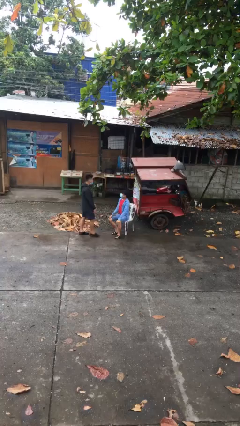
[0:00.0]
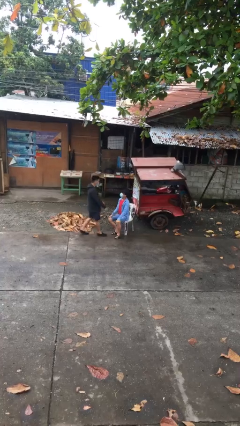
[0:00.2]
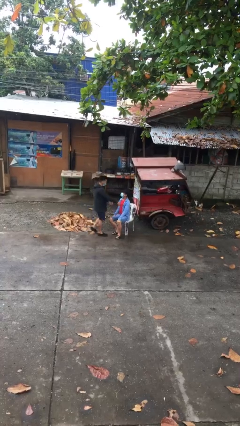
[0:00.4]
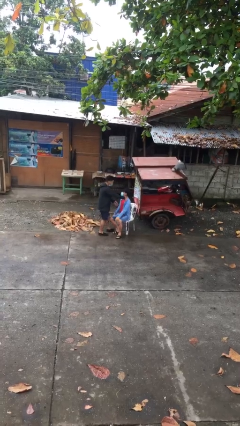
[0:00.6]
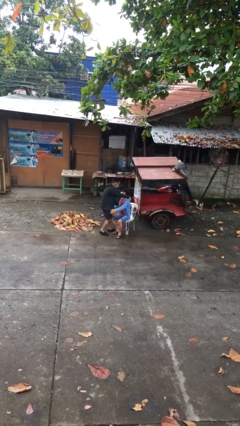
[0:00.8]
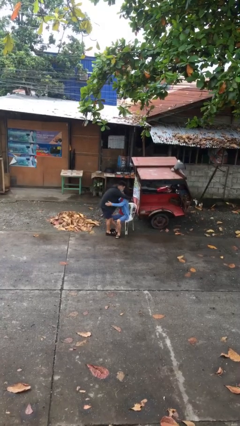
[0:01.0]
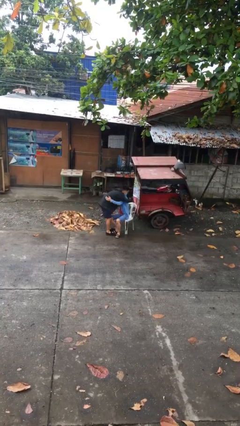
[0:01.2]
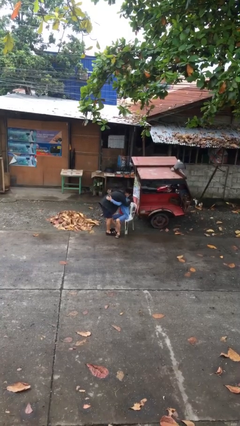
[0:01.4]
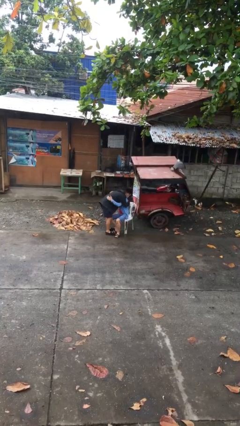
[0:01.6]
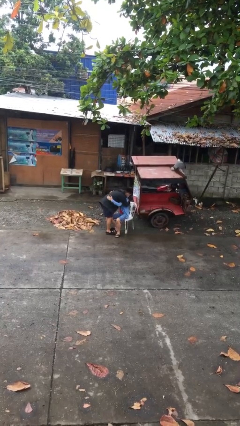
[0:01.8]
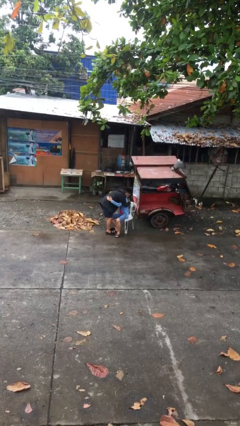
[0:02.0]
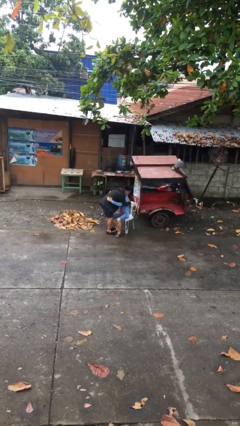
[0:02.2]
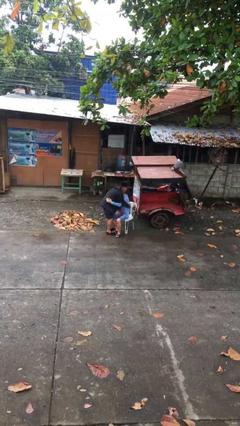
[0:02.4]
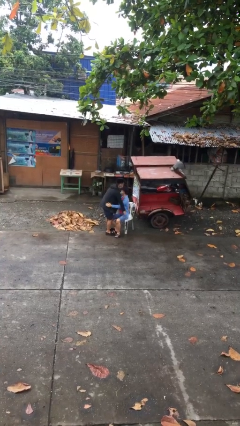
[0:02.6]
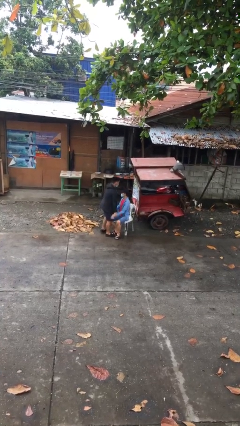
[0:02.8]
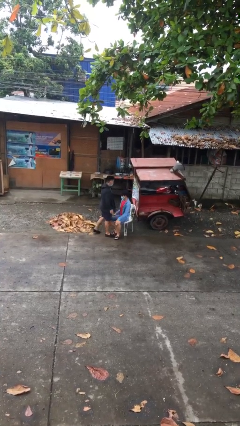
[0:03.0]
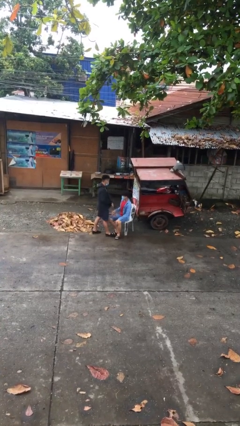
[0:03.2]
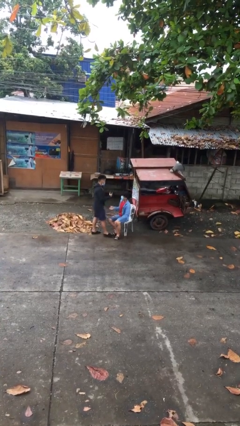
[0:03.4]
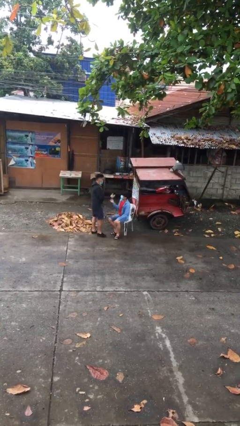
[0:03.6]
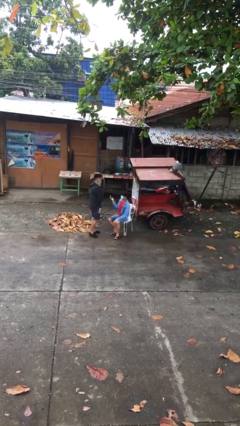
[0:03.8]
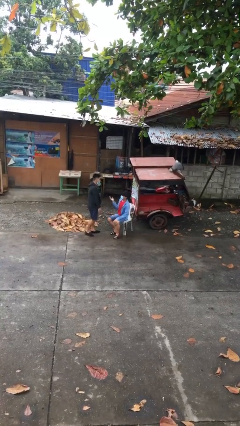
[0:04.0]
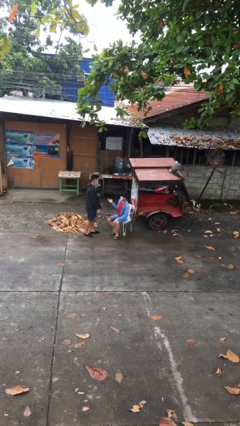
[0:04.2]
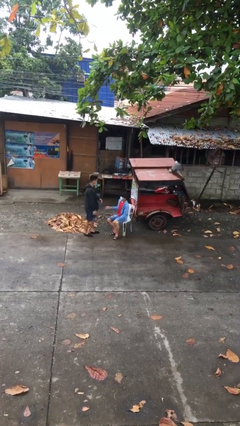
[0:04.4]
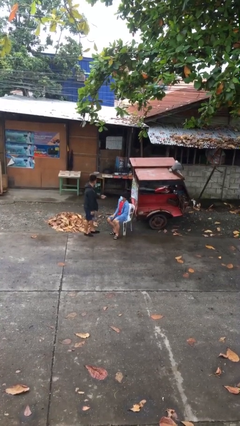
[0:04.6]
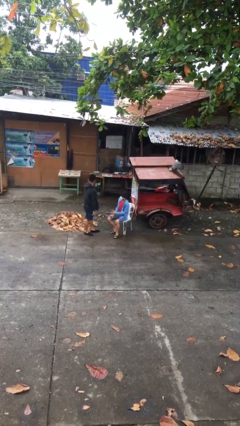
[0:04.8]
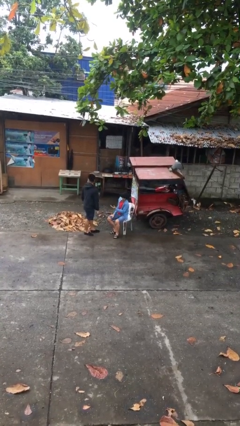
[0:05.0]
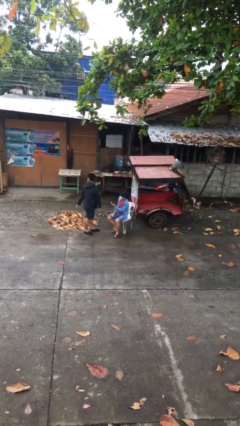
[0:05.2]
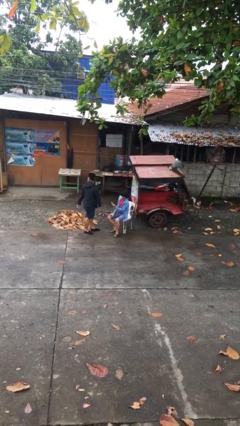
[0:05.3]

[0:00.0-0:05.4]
person embraces person

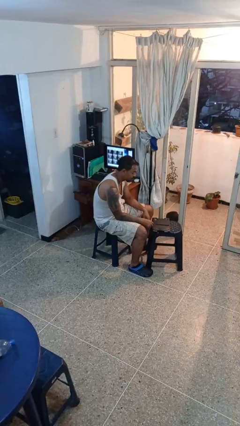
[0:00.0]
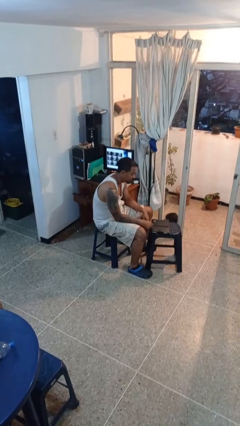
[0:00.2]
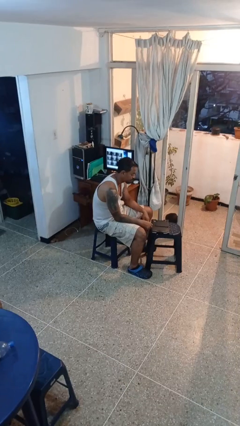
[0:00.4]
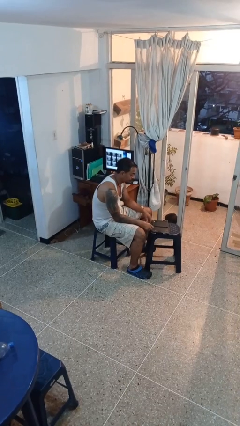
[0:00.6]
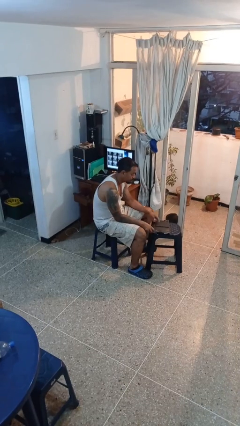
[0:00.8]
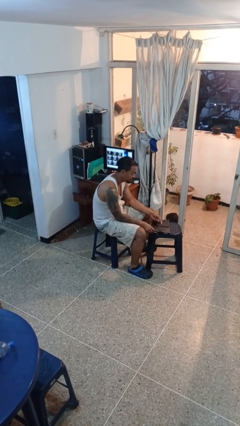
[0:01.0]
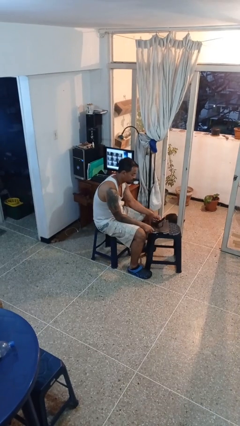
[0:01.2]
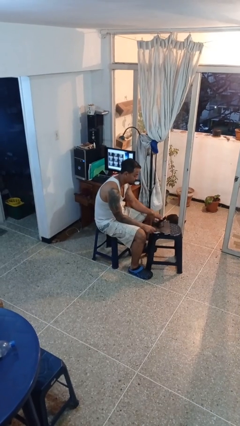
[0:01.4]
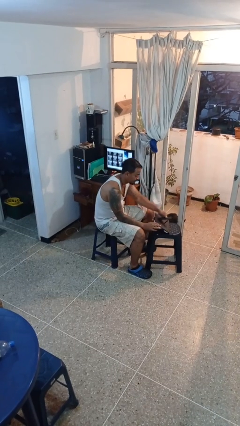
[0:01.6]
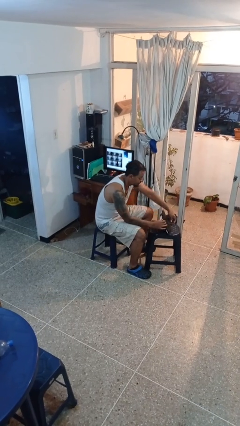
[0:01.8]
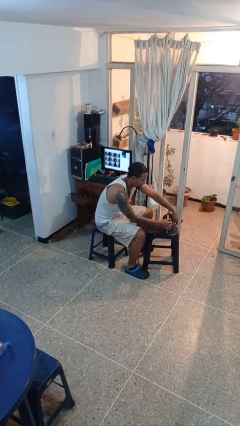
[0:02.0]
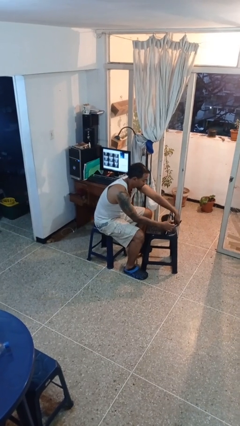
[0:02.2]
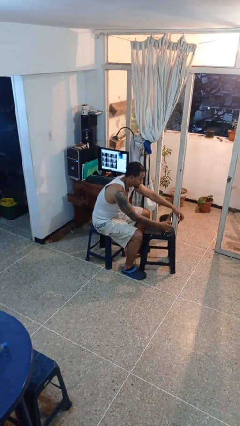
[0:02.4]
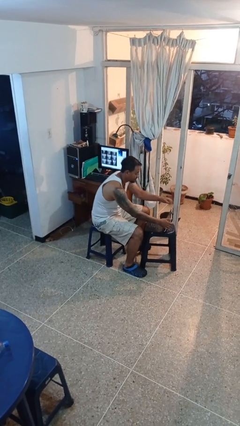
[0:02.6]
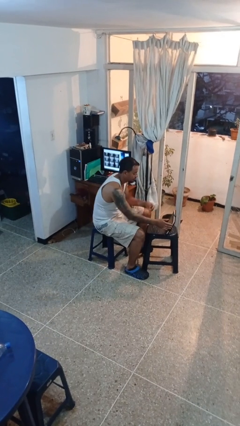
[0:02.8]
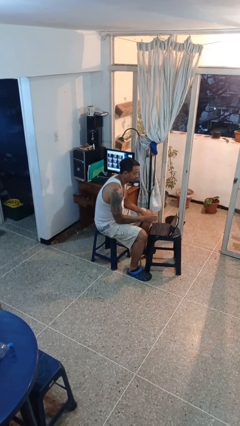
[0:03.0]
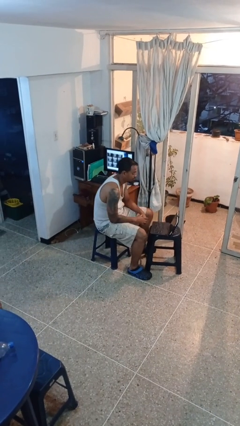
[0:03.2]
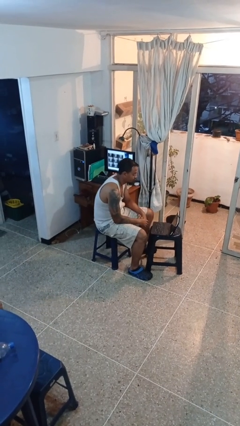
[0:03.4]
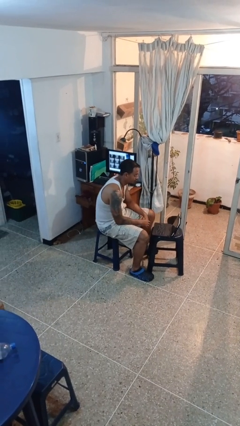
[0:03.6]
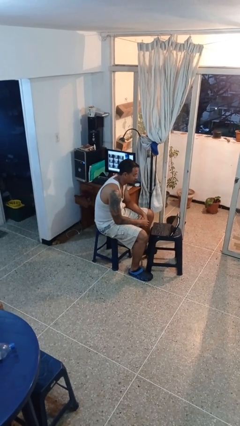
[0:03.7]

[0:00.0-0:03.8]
person opens laptop

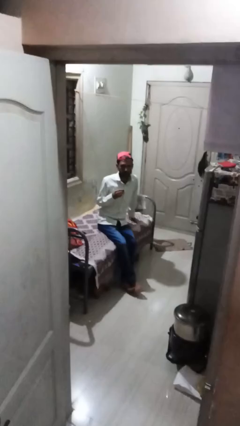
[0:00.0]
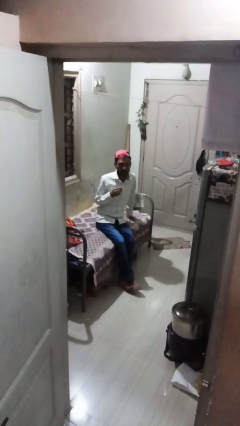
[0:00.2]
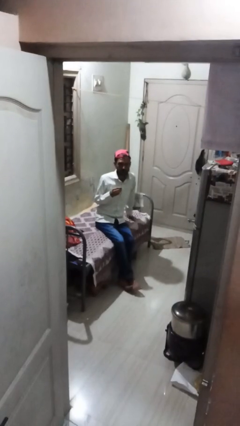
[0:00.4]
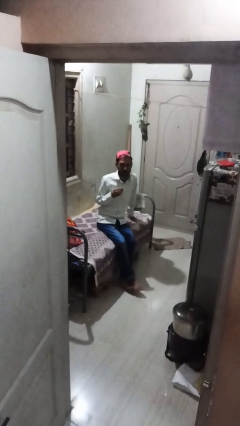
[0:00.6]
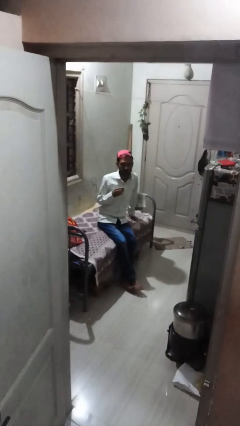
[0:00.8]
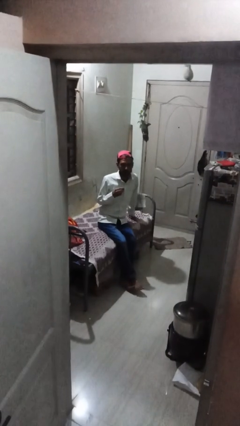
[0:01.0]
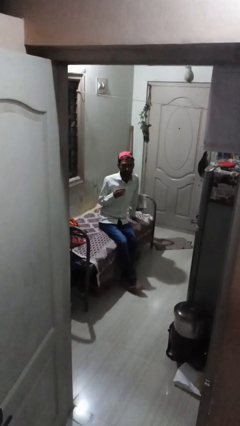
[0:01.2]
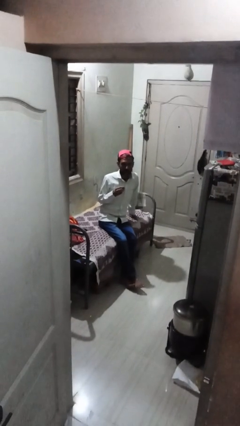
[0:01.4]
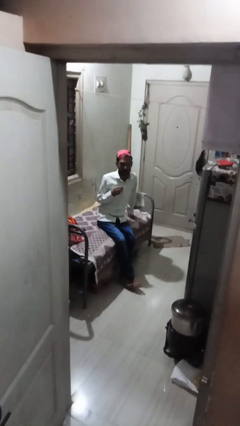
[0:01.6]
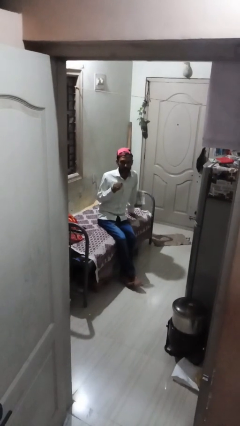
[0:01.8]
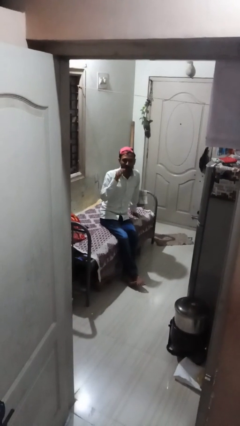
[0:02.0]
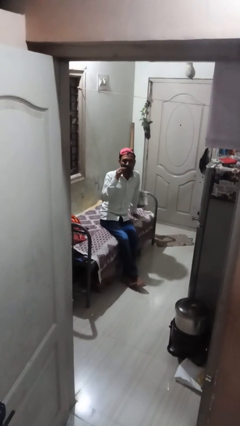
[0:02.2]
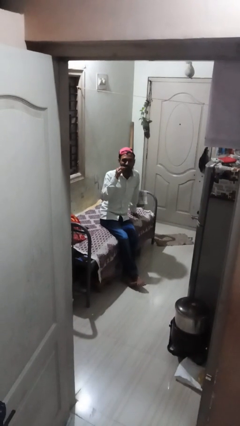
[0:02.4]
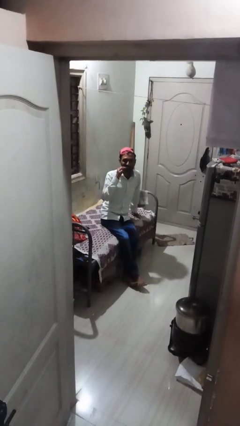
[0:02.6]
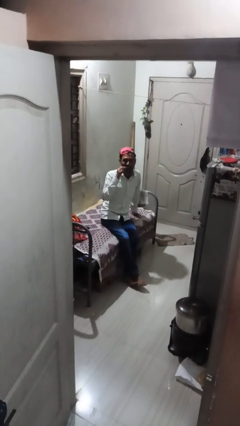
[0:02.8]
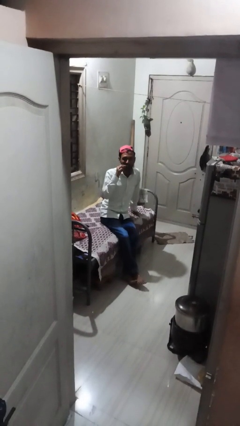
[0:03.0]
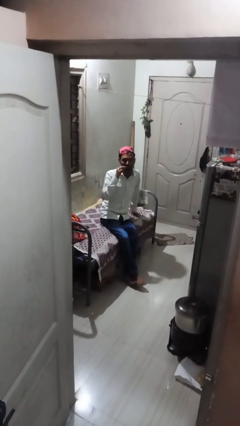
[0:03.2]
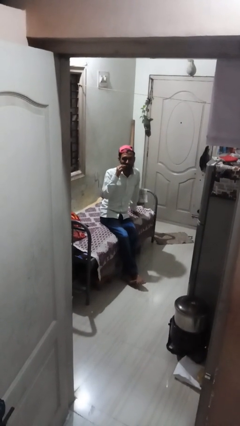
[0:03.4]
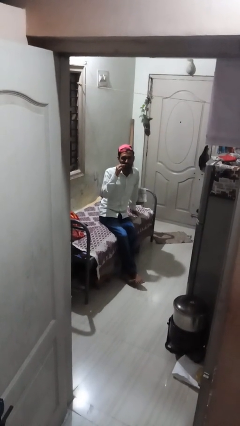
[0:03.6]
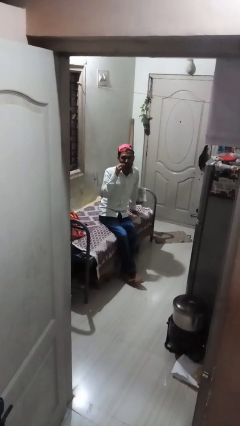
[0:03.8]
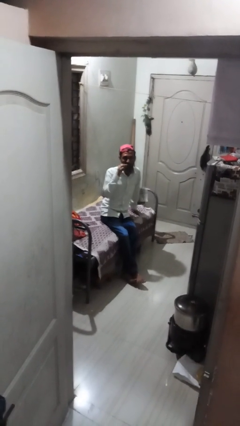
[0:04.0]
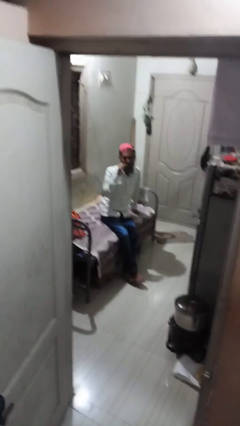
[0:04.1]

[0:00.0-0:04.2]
person flosses

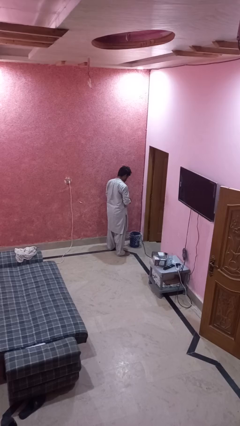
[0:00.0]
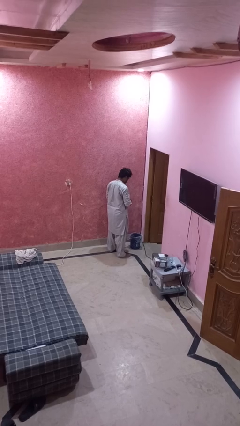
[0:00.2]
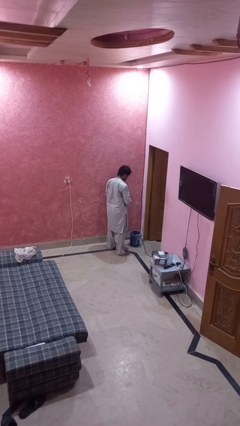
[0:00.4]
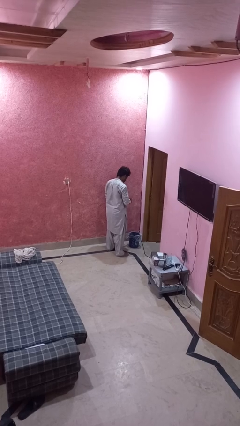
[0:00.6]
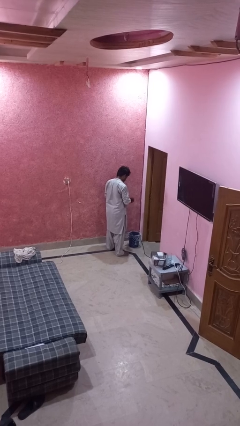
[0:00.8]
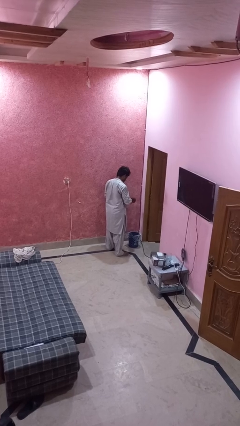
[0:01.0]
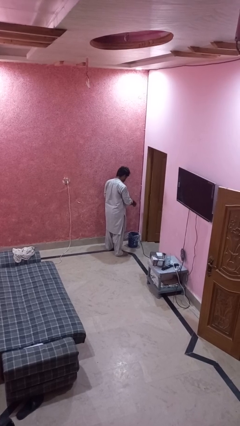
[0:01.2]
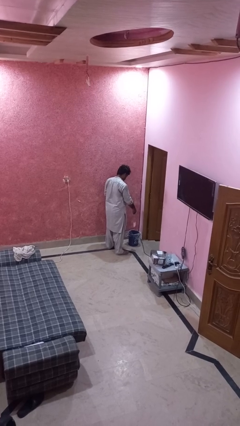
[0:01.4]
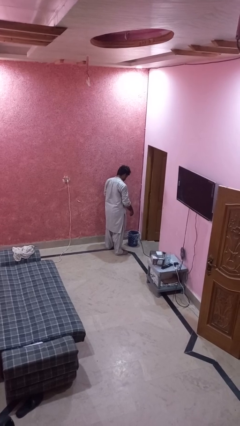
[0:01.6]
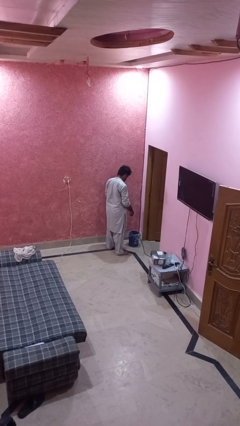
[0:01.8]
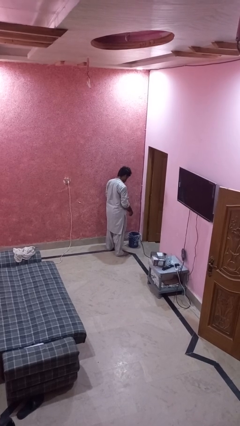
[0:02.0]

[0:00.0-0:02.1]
person discards trash

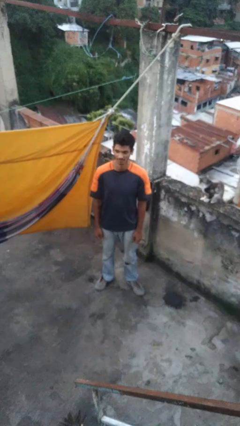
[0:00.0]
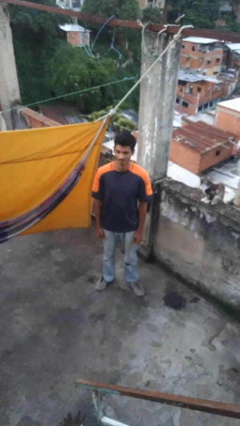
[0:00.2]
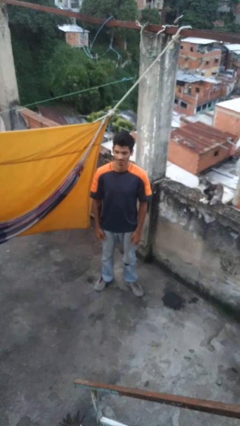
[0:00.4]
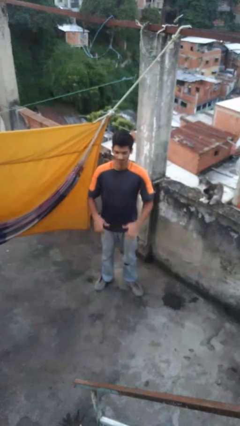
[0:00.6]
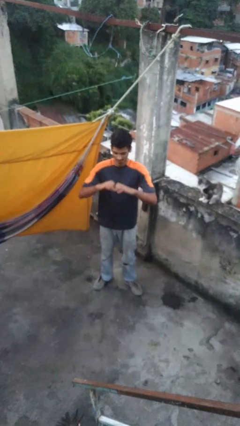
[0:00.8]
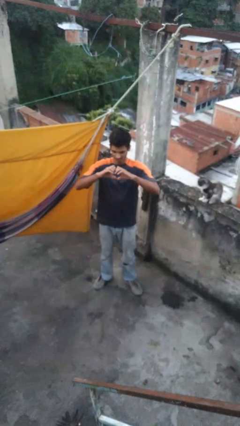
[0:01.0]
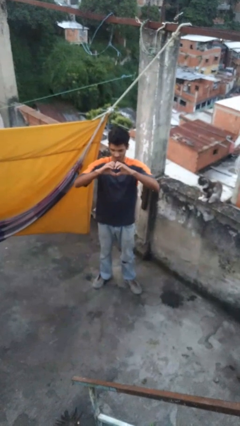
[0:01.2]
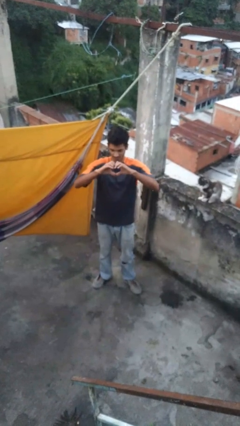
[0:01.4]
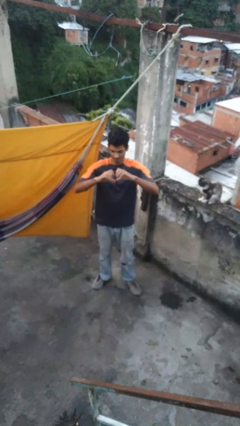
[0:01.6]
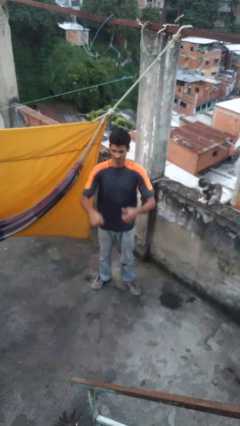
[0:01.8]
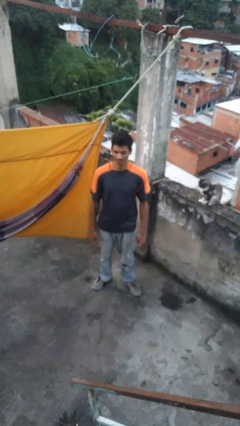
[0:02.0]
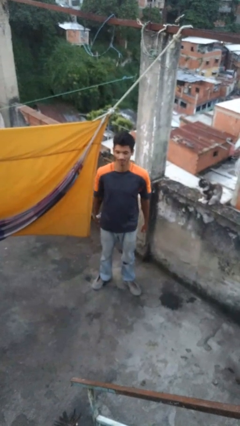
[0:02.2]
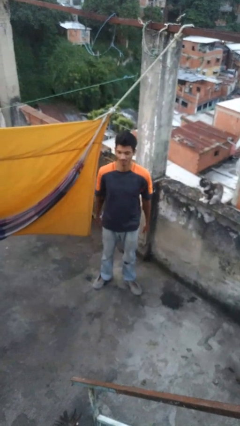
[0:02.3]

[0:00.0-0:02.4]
person gestures heart
